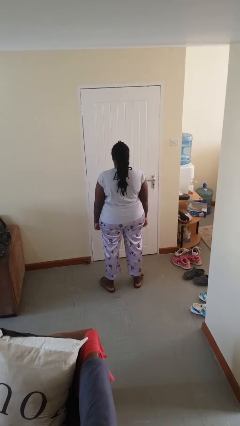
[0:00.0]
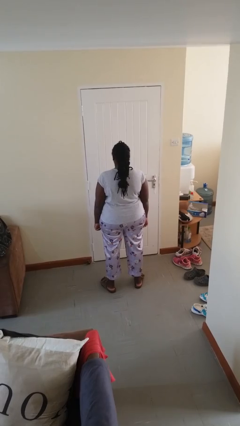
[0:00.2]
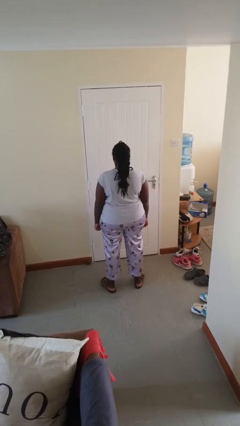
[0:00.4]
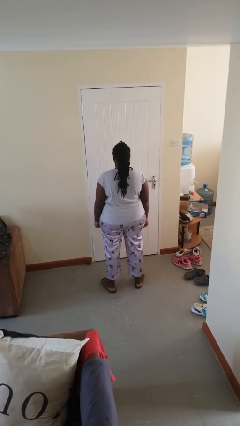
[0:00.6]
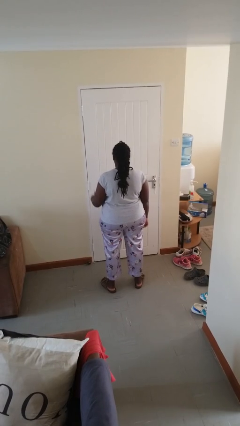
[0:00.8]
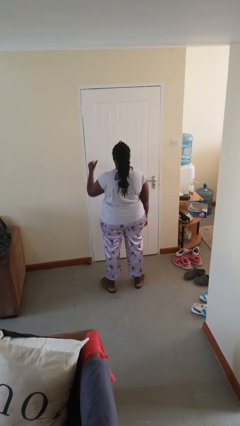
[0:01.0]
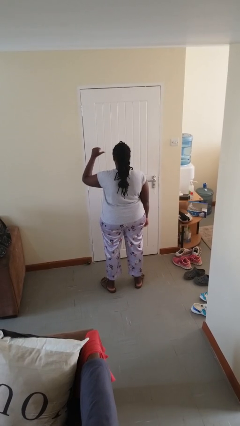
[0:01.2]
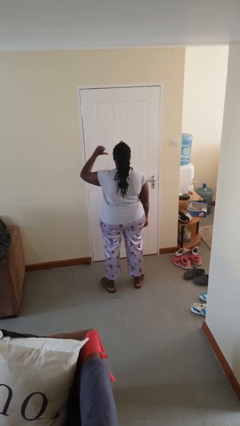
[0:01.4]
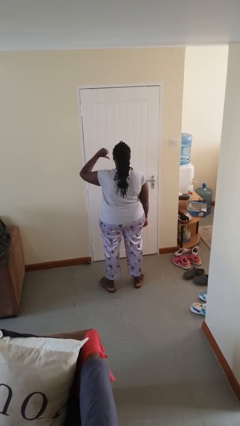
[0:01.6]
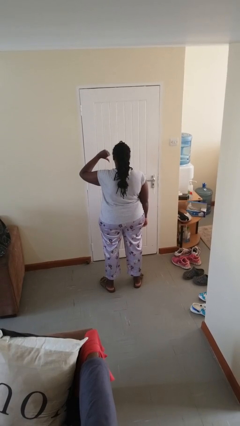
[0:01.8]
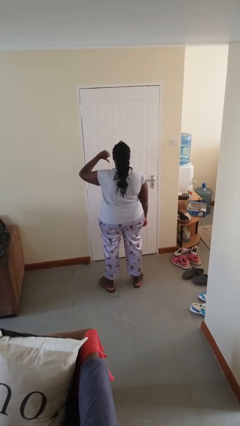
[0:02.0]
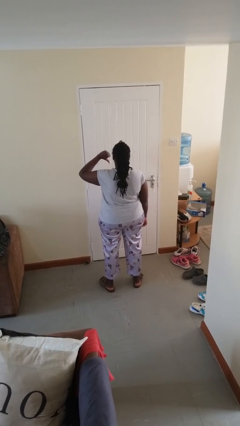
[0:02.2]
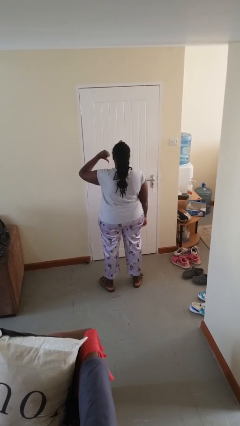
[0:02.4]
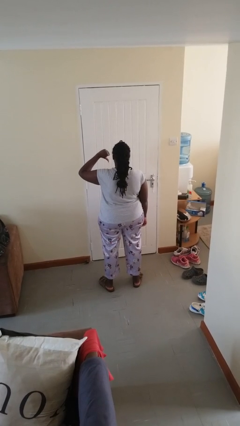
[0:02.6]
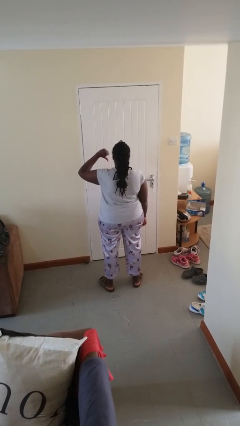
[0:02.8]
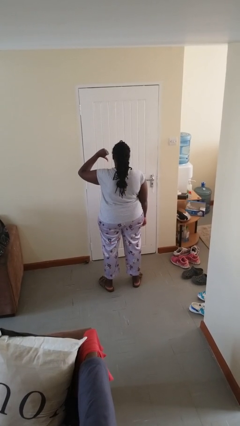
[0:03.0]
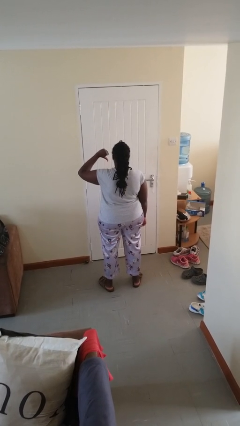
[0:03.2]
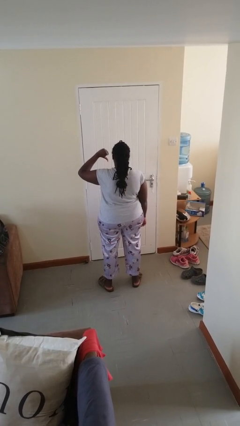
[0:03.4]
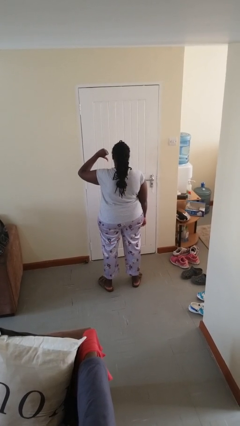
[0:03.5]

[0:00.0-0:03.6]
person gestures thumbs down

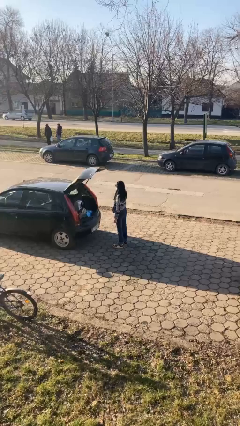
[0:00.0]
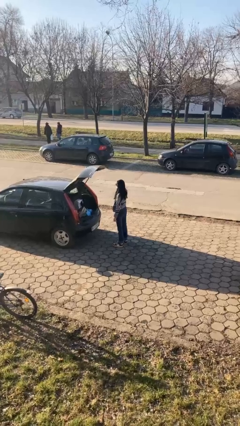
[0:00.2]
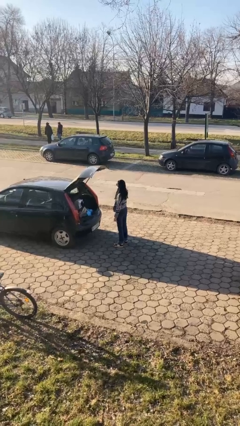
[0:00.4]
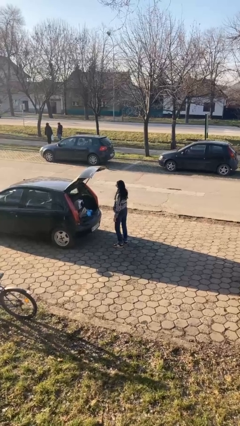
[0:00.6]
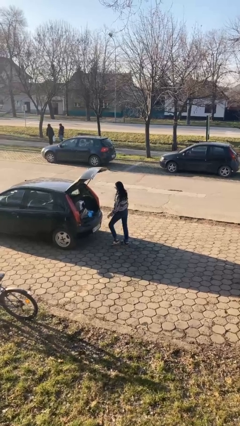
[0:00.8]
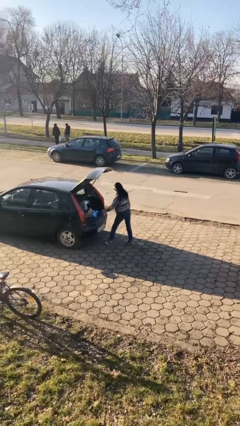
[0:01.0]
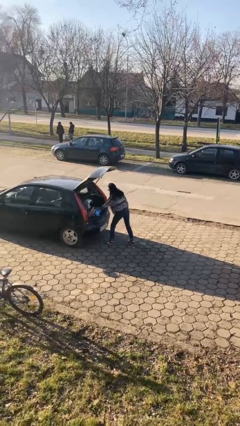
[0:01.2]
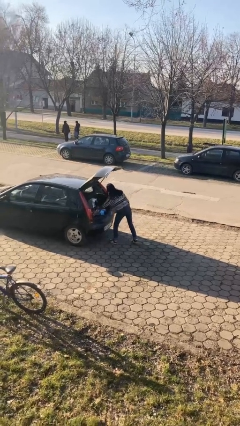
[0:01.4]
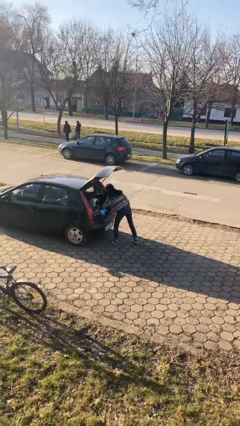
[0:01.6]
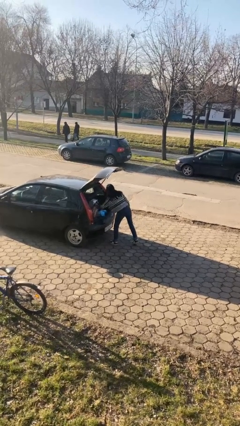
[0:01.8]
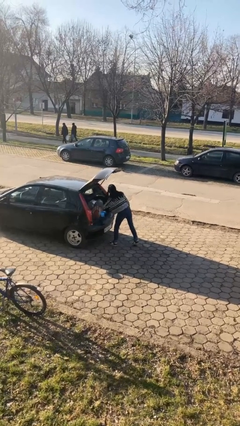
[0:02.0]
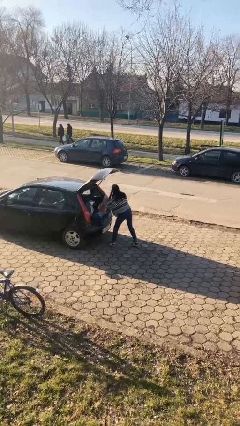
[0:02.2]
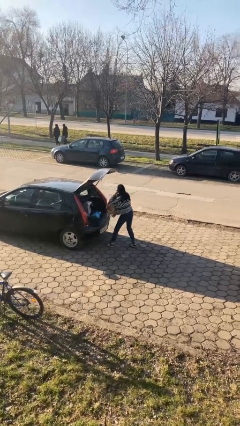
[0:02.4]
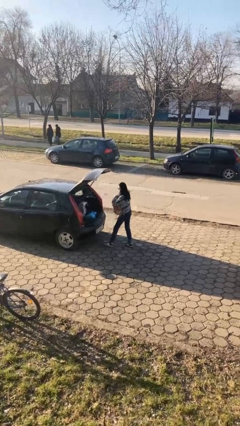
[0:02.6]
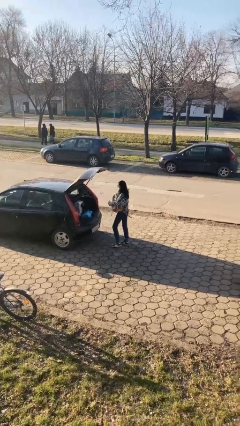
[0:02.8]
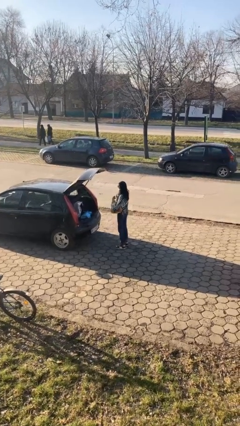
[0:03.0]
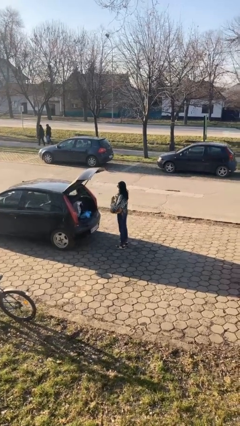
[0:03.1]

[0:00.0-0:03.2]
person unloads car

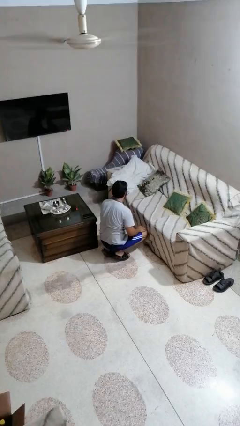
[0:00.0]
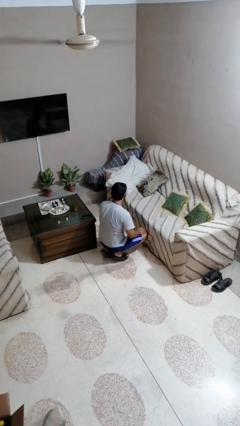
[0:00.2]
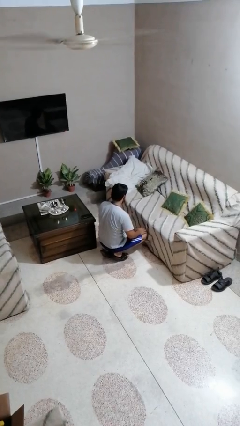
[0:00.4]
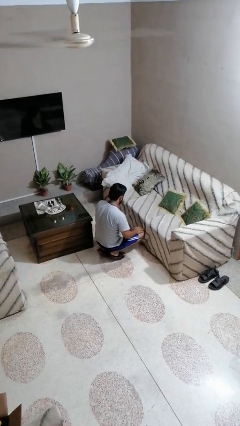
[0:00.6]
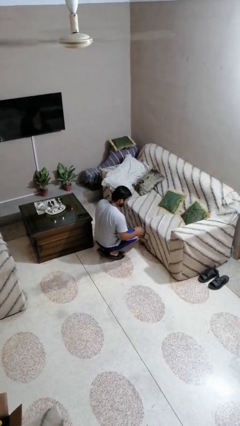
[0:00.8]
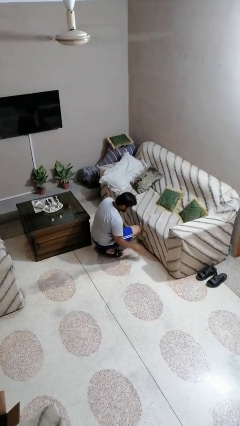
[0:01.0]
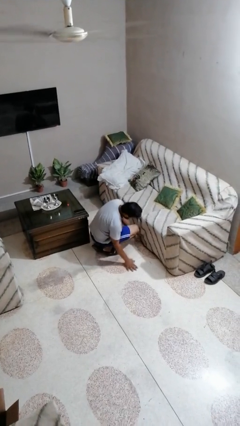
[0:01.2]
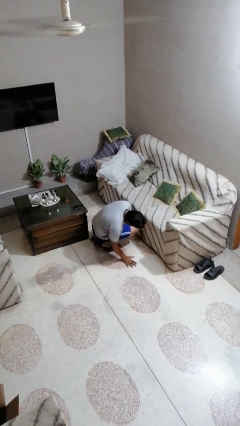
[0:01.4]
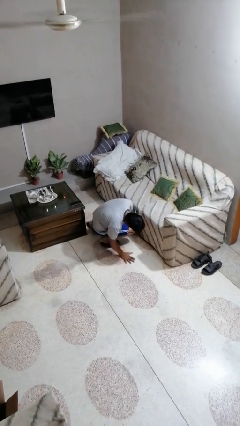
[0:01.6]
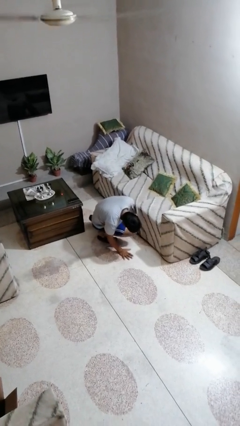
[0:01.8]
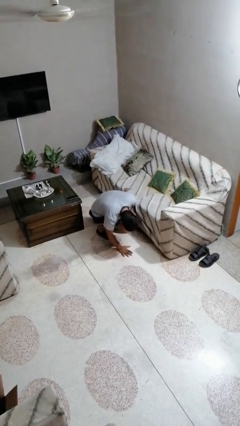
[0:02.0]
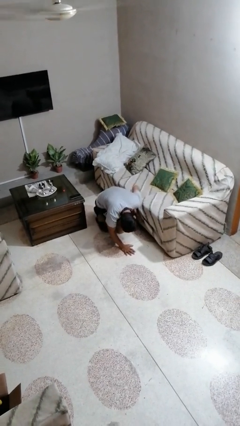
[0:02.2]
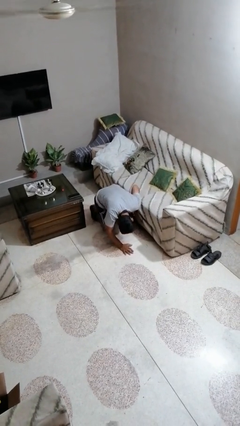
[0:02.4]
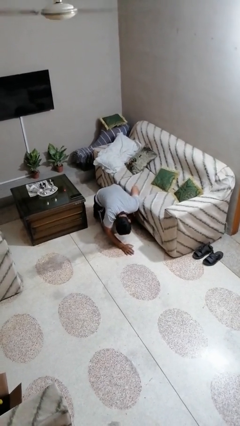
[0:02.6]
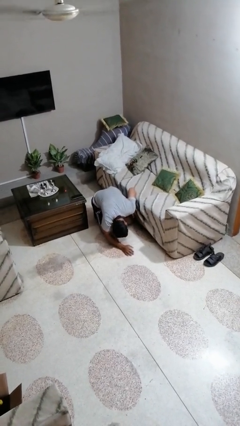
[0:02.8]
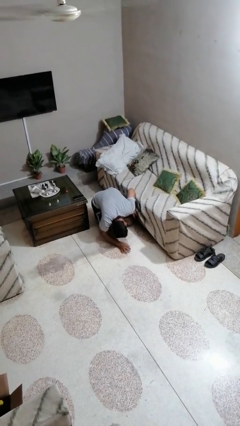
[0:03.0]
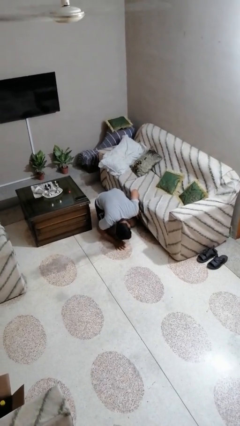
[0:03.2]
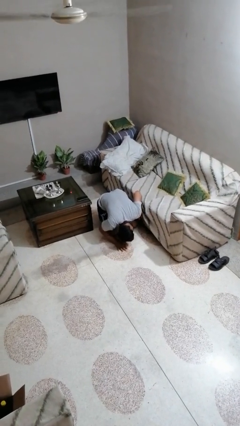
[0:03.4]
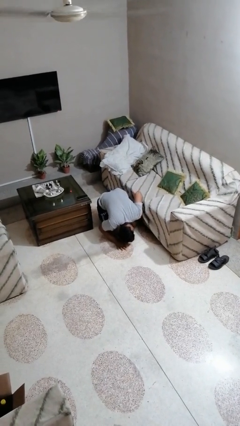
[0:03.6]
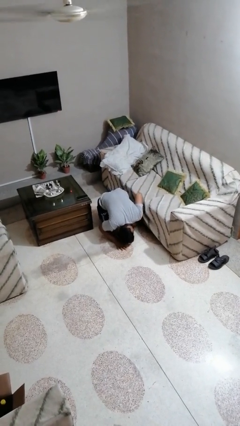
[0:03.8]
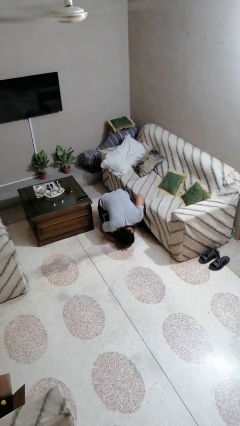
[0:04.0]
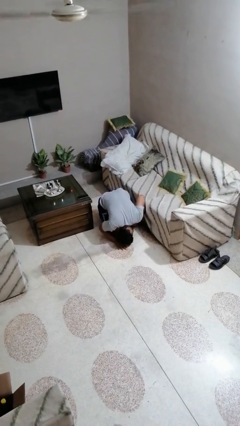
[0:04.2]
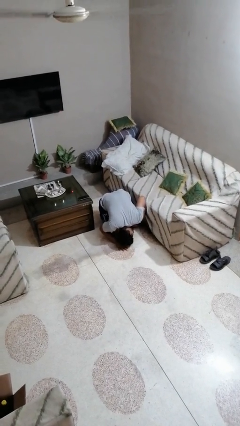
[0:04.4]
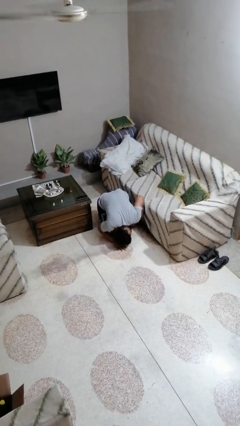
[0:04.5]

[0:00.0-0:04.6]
person searches under couch

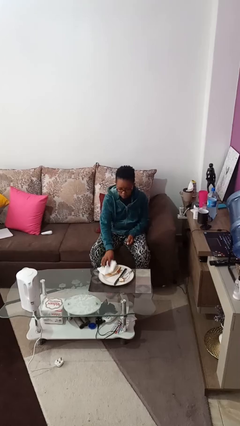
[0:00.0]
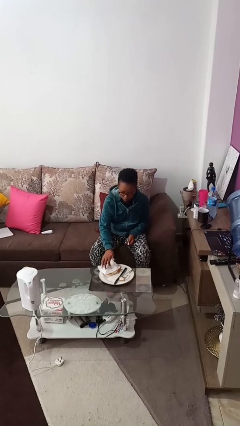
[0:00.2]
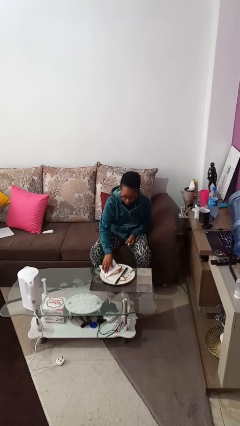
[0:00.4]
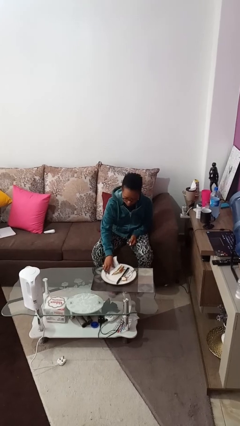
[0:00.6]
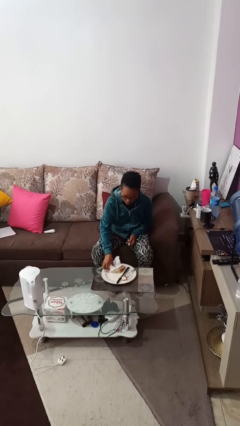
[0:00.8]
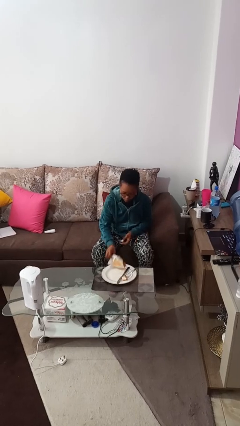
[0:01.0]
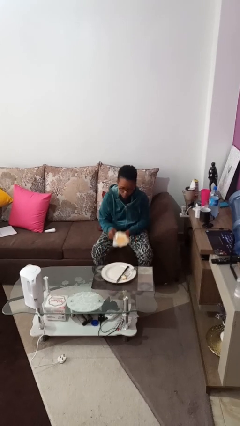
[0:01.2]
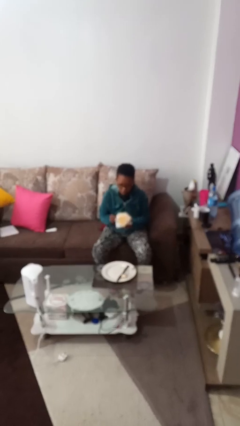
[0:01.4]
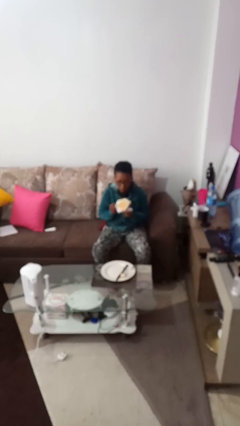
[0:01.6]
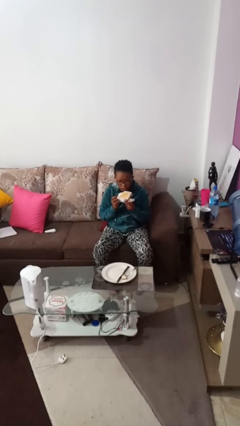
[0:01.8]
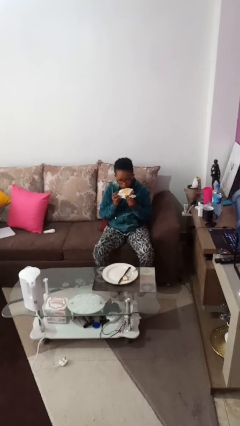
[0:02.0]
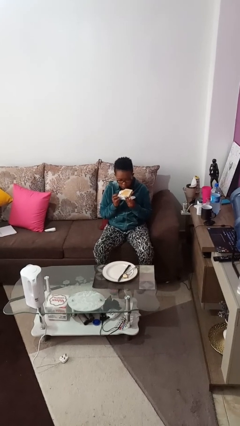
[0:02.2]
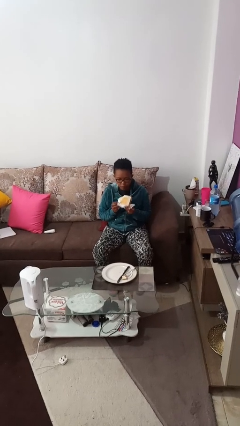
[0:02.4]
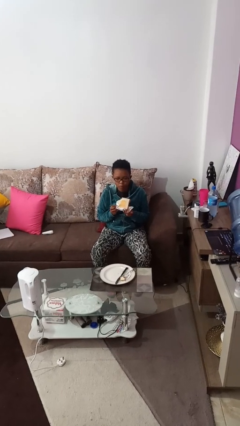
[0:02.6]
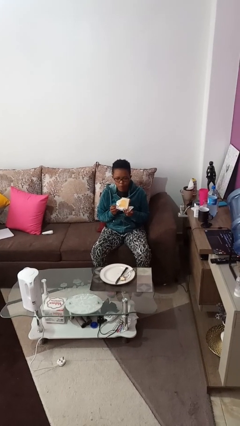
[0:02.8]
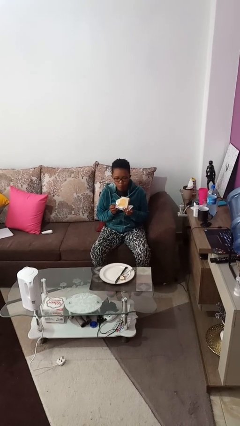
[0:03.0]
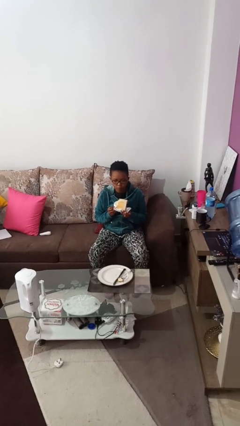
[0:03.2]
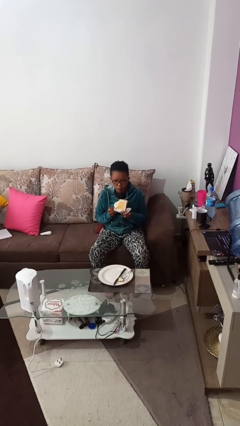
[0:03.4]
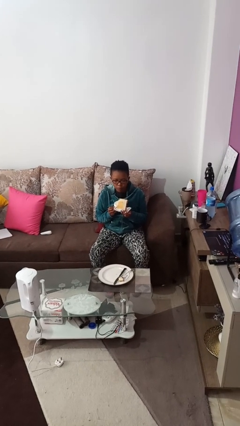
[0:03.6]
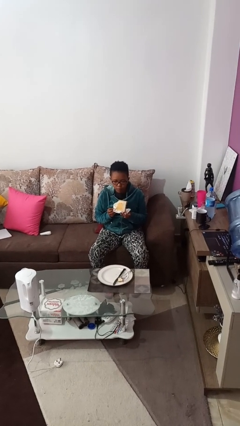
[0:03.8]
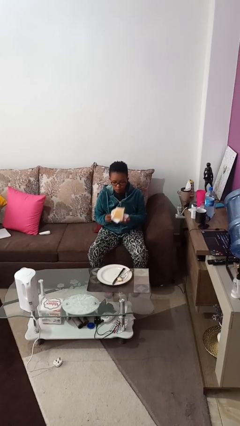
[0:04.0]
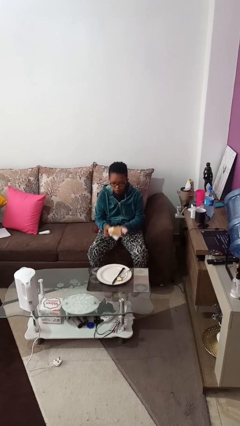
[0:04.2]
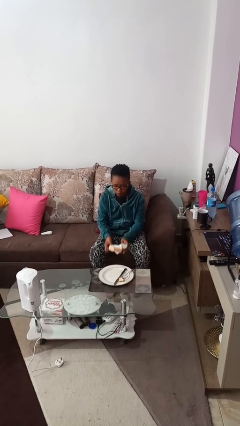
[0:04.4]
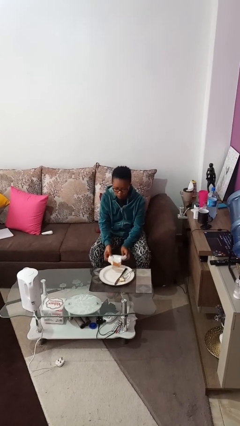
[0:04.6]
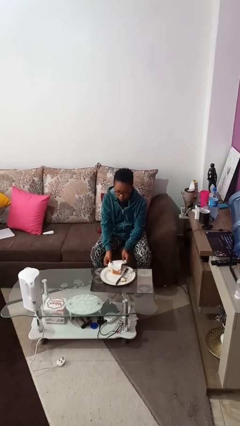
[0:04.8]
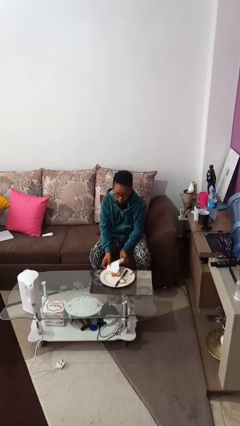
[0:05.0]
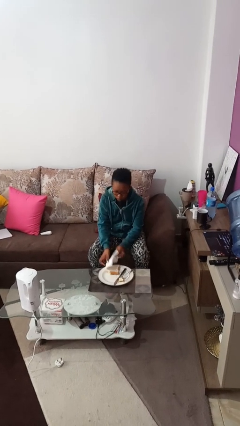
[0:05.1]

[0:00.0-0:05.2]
person eats with hands

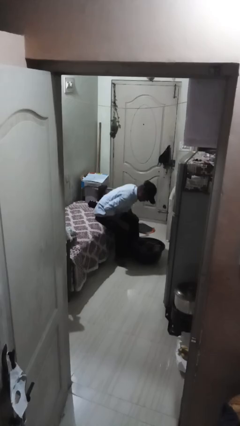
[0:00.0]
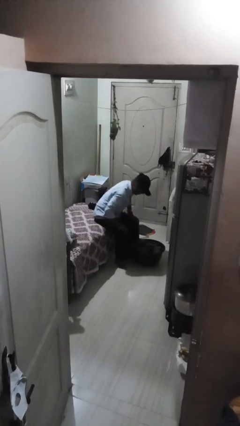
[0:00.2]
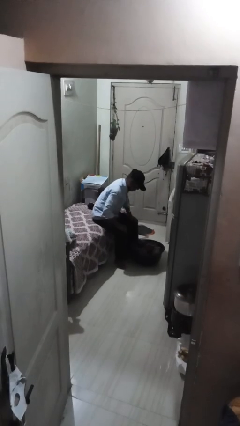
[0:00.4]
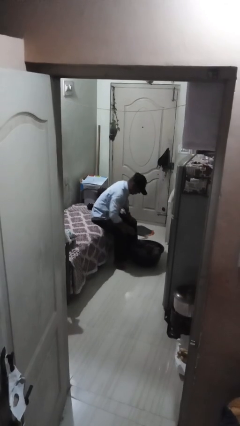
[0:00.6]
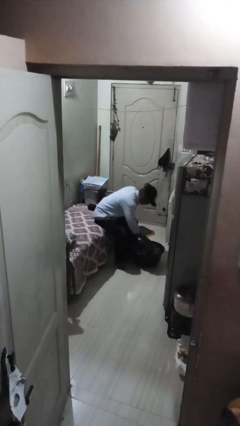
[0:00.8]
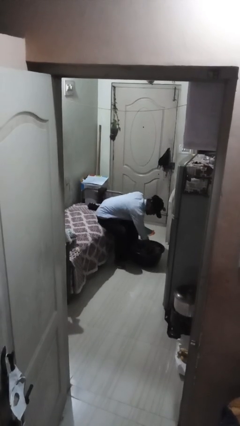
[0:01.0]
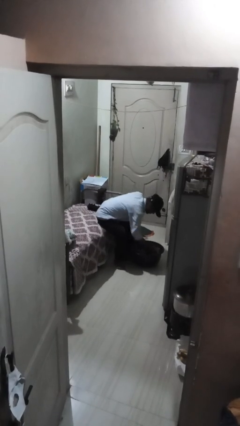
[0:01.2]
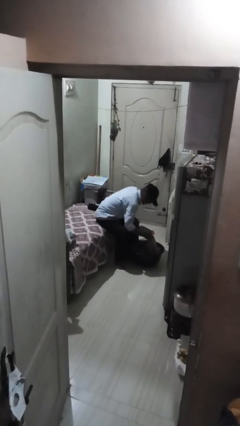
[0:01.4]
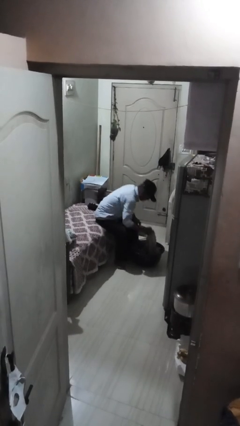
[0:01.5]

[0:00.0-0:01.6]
person takes object from basket
